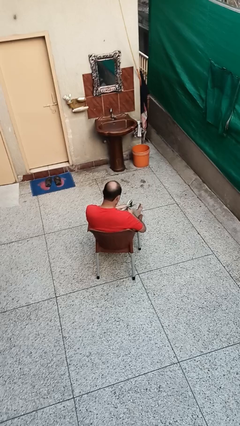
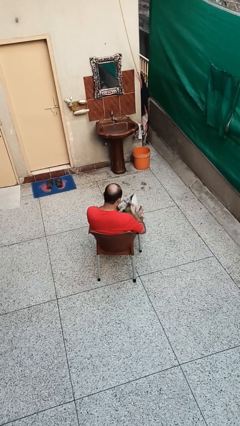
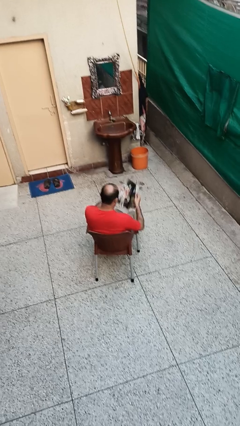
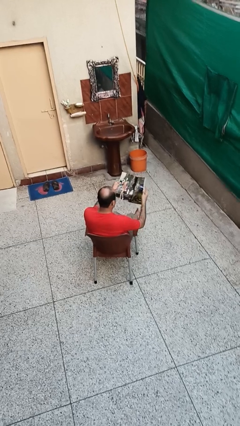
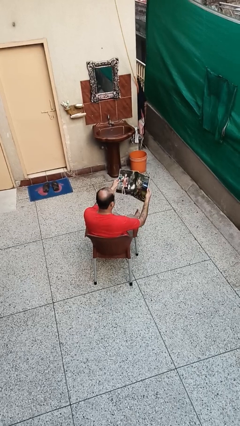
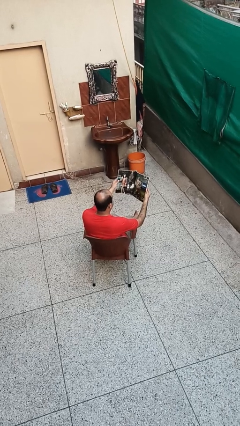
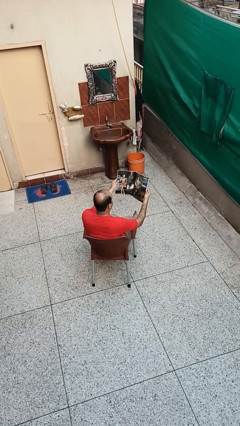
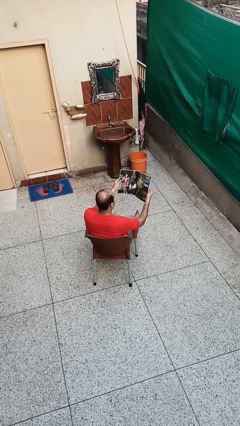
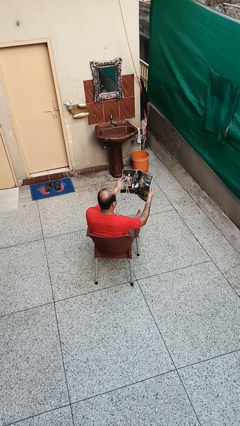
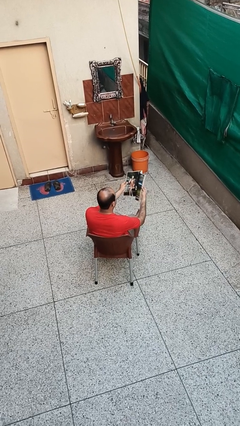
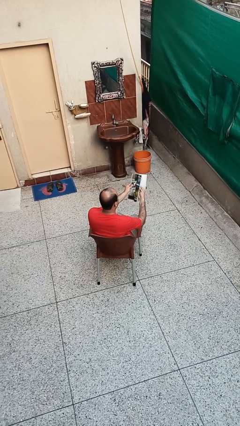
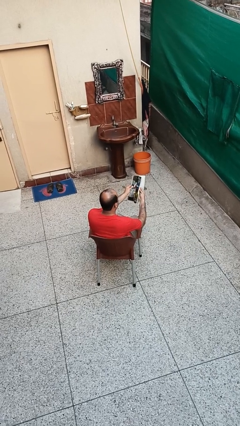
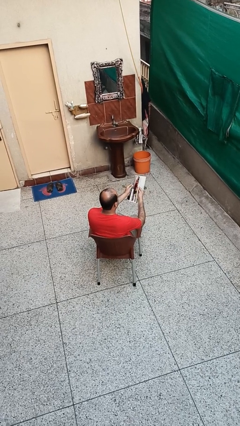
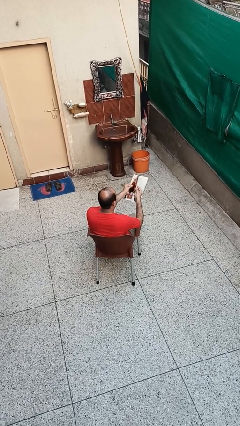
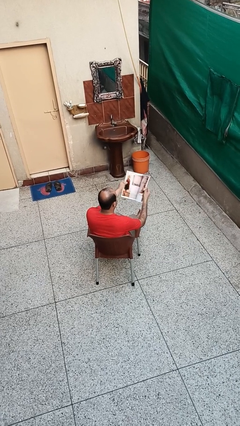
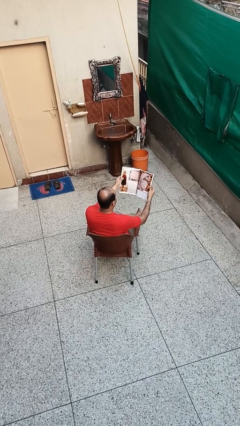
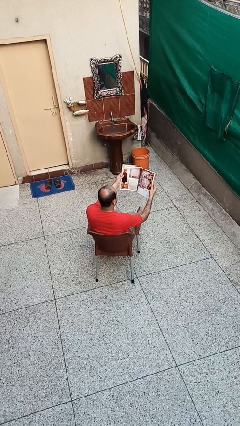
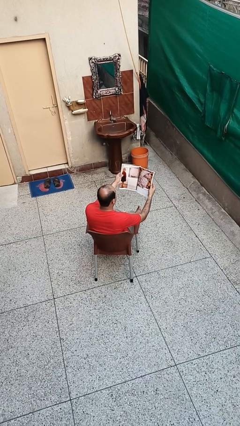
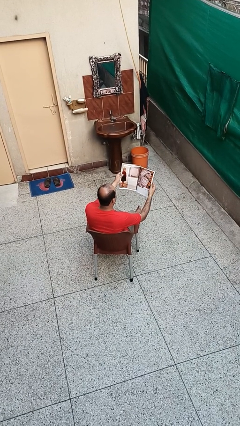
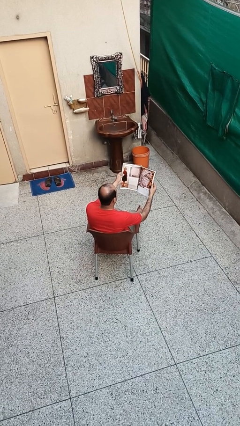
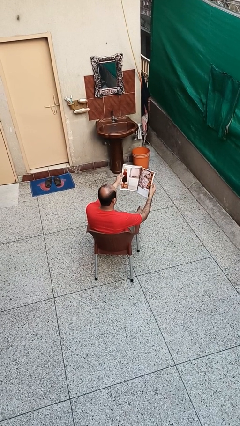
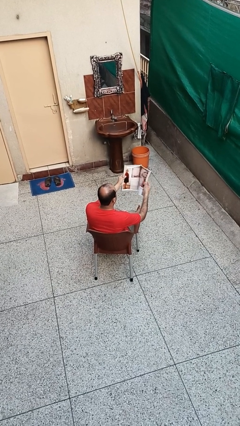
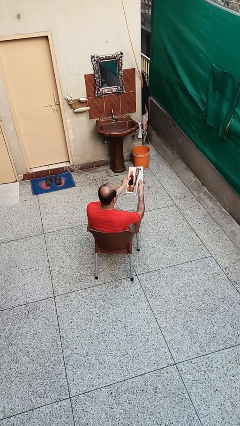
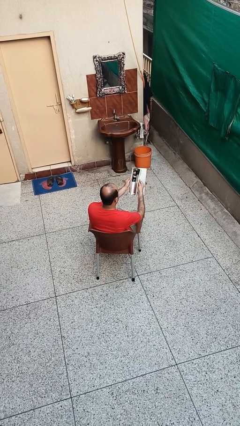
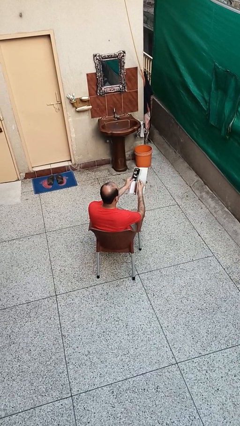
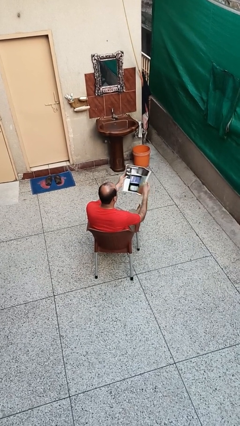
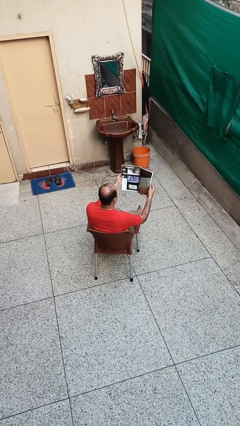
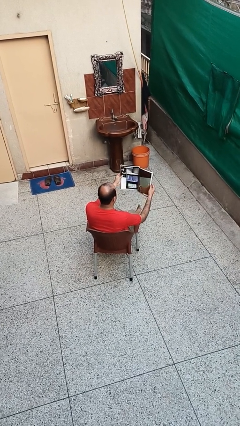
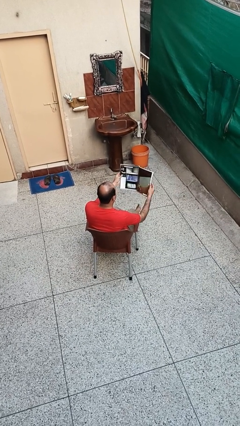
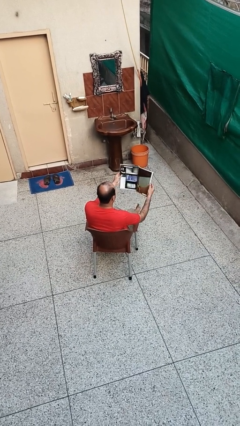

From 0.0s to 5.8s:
person reads magazine

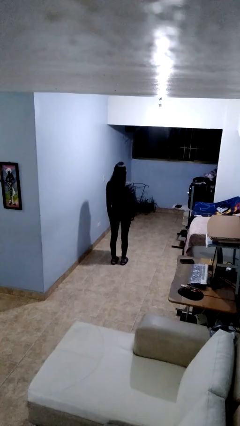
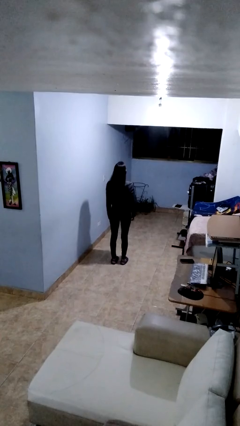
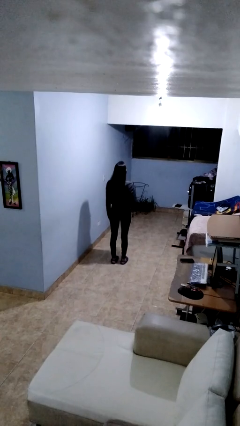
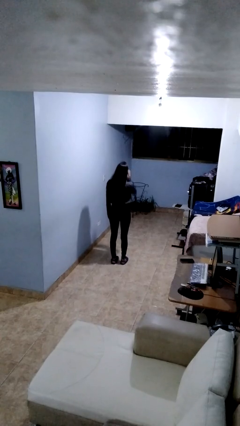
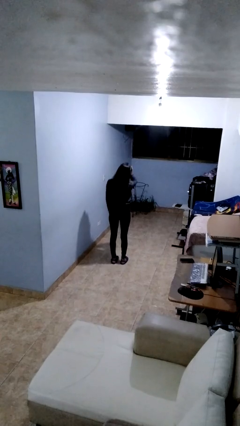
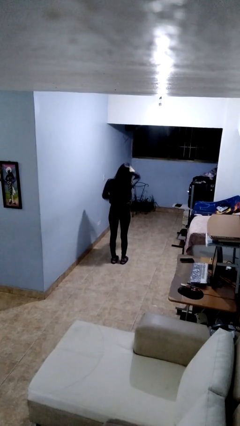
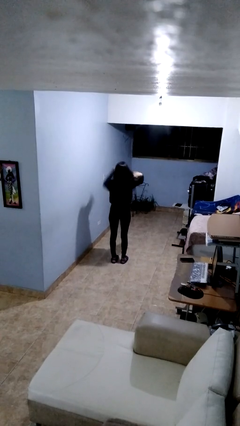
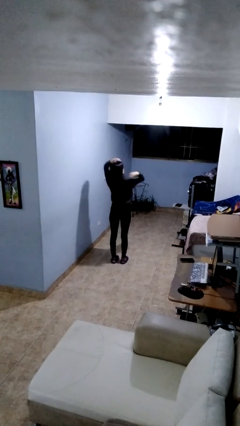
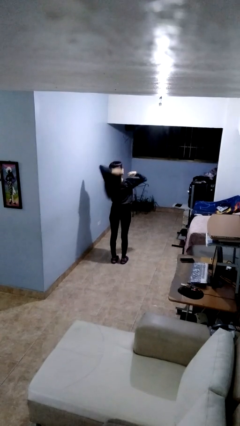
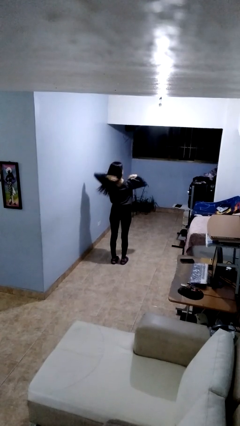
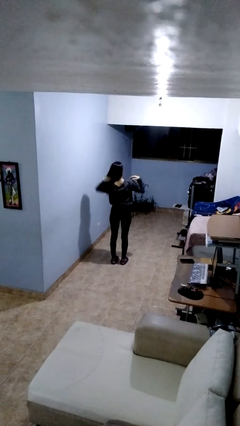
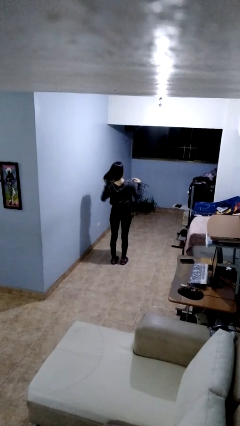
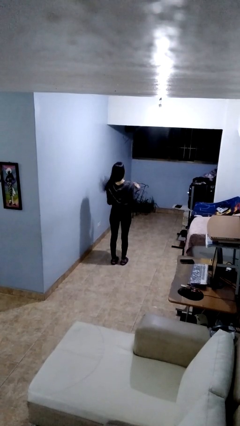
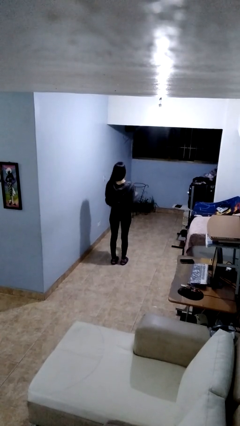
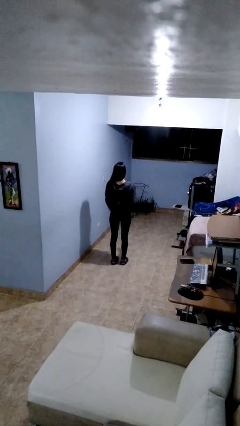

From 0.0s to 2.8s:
person strokes hair

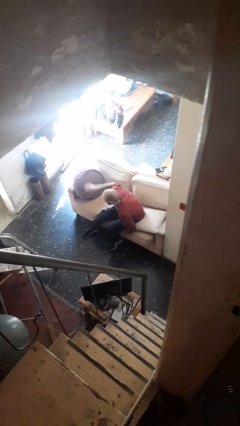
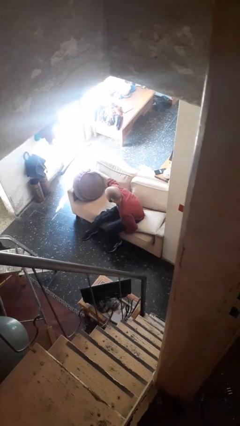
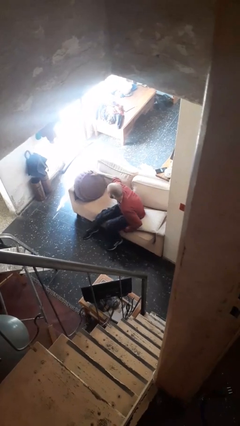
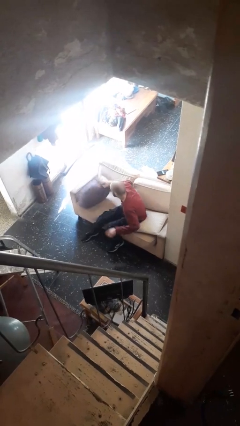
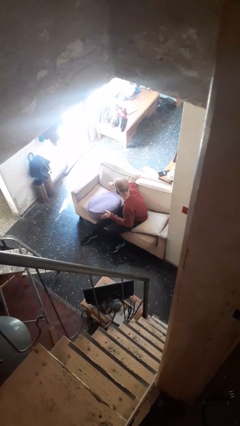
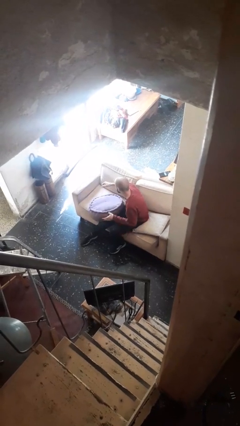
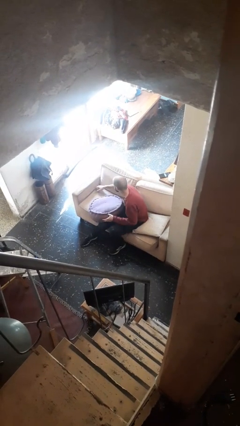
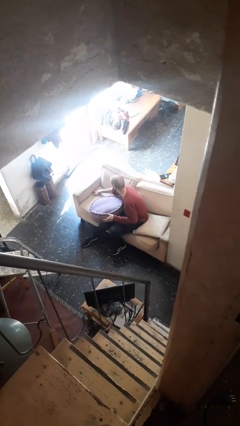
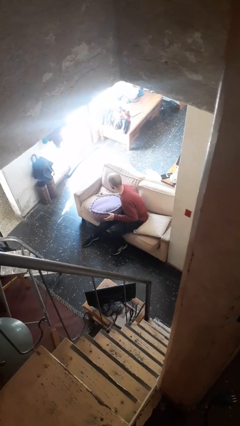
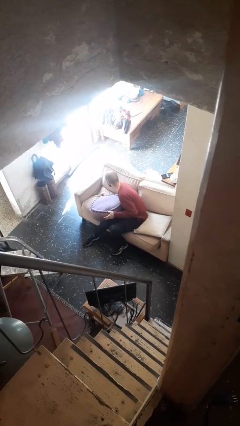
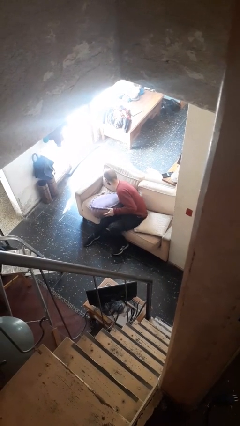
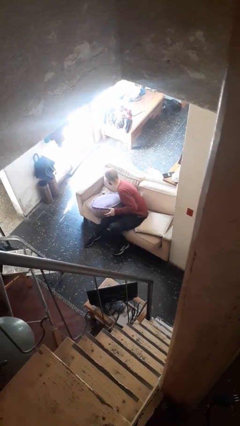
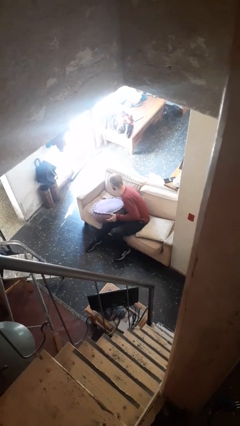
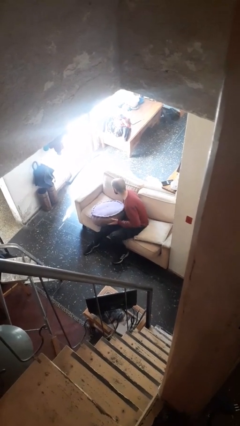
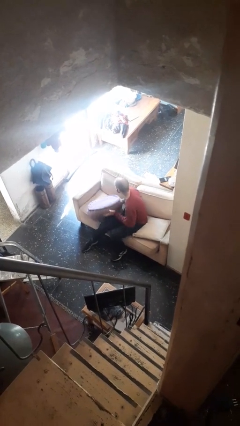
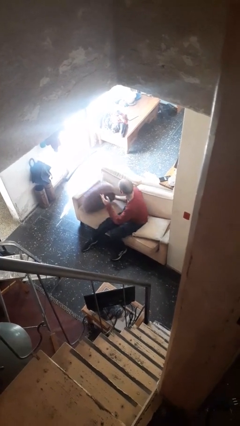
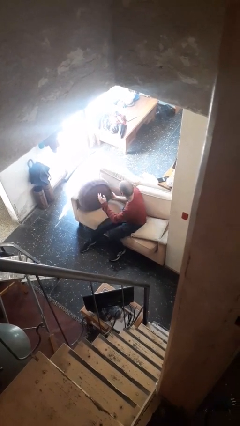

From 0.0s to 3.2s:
person searches in couch

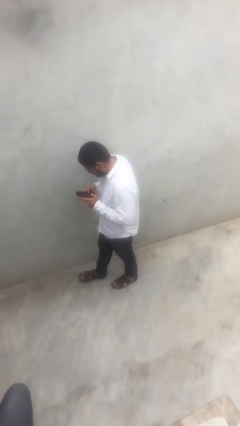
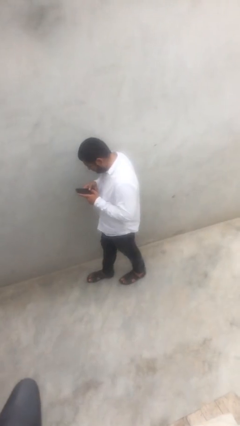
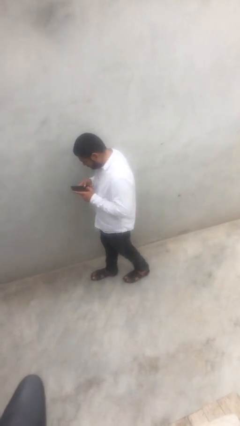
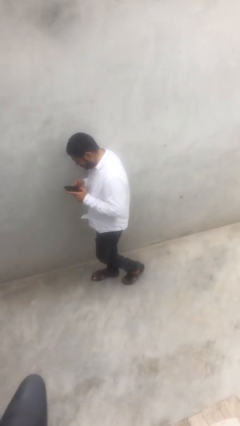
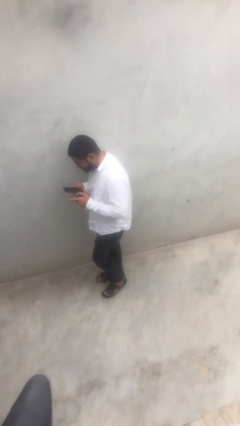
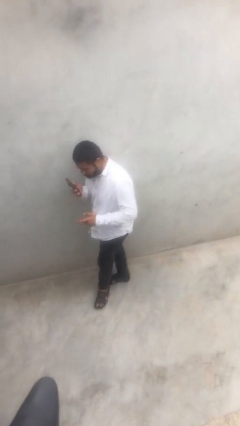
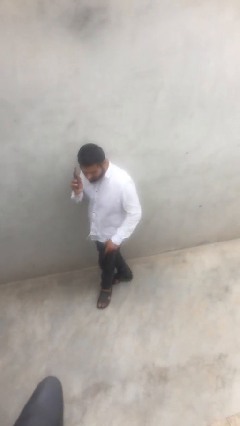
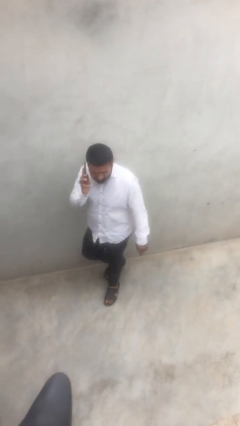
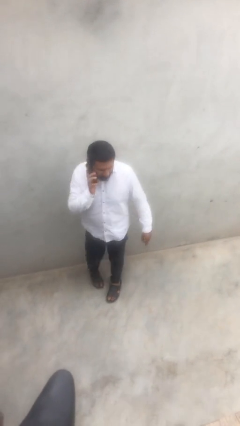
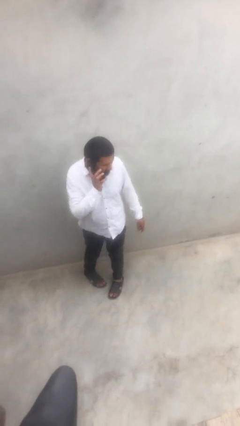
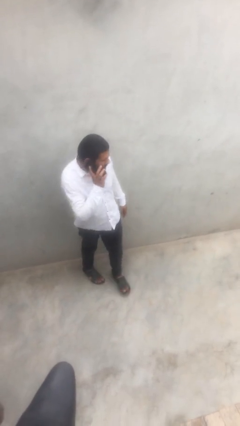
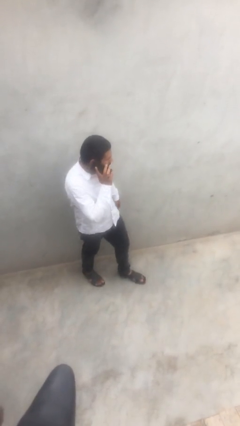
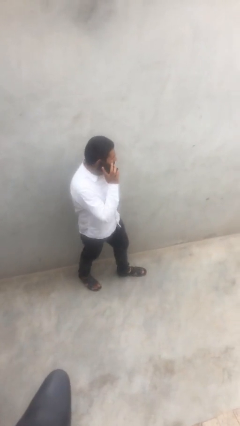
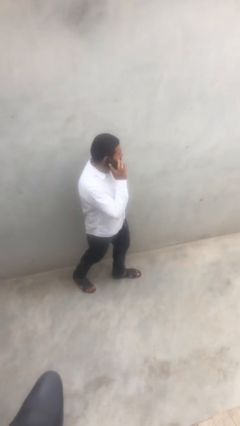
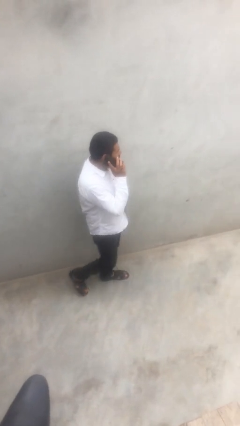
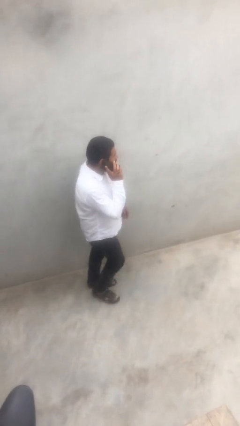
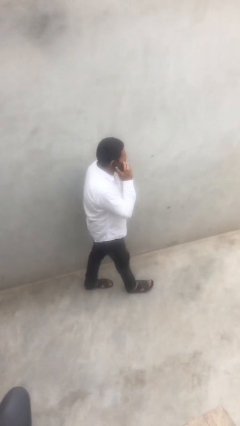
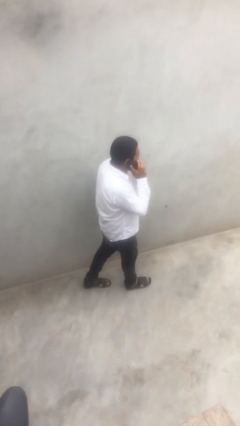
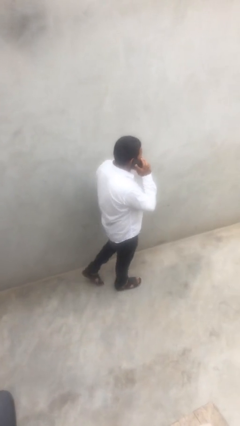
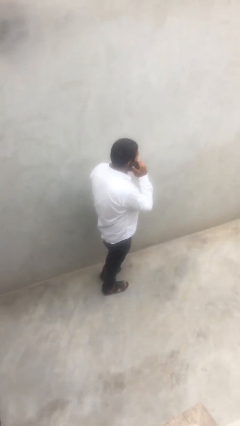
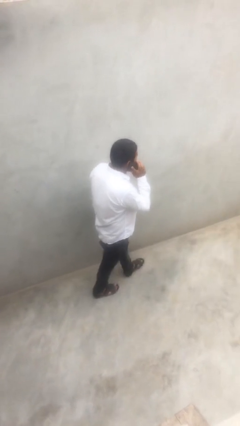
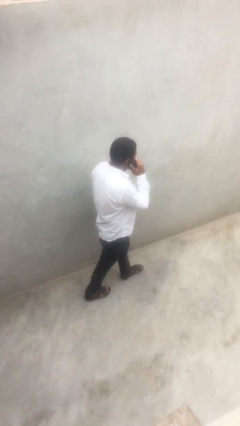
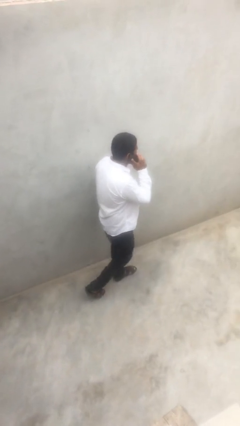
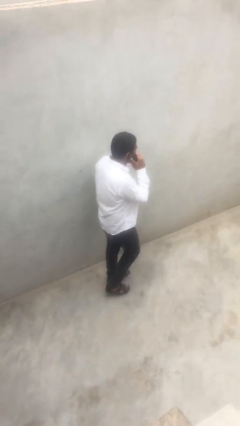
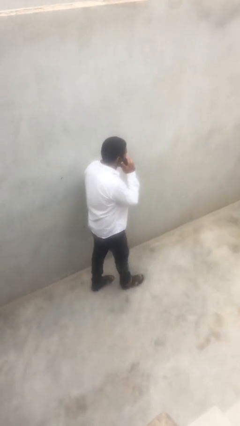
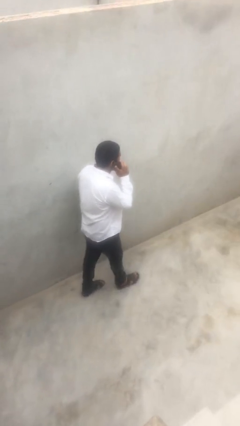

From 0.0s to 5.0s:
person talks on phone

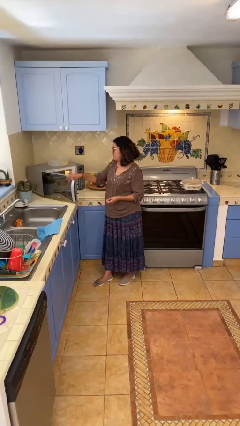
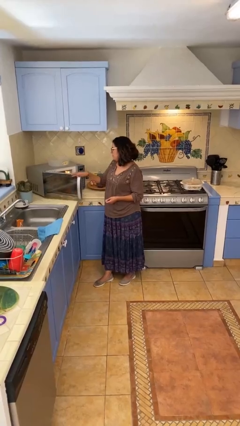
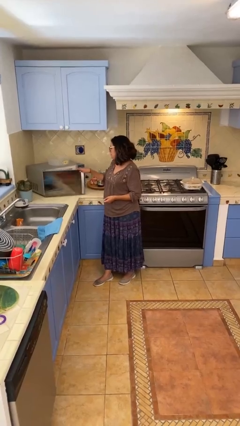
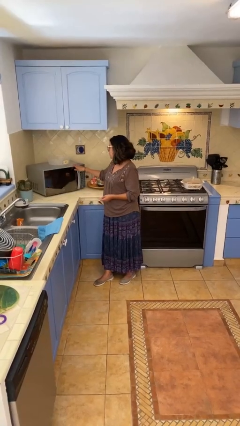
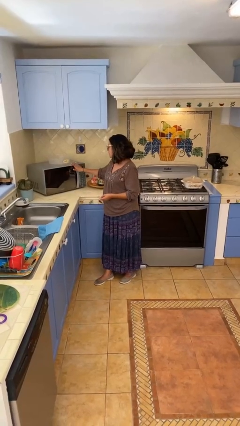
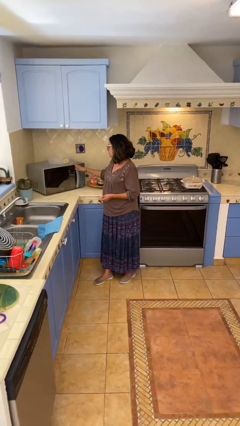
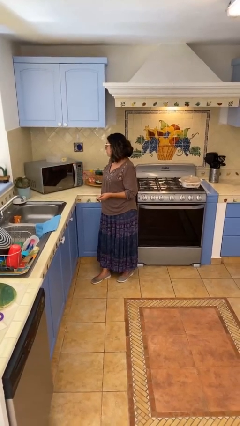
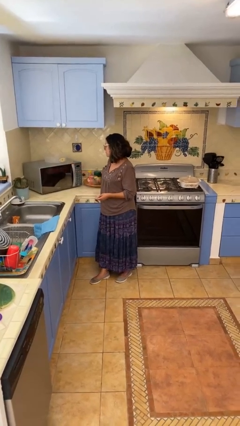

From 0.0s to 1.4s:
person closes microwave
